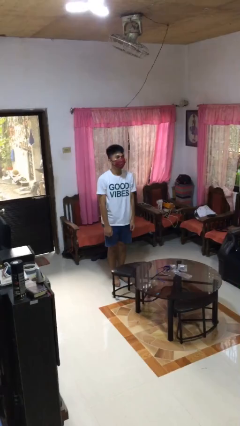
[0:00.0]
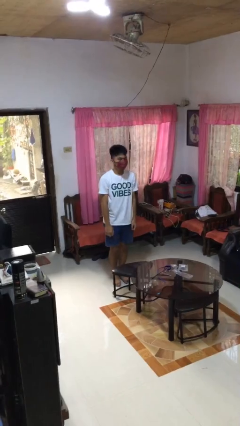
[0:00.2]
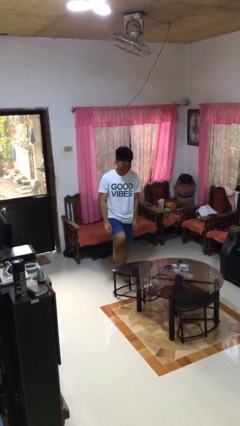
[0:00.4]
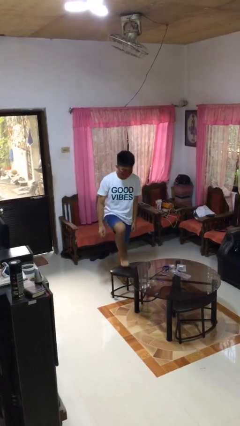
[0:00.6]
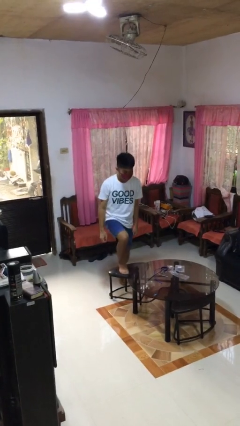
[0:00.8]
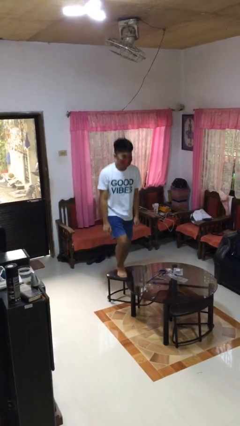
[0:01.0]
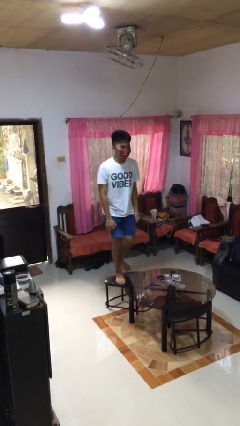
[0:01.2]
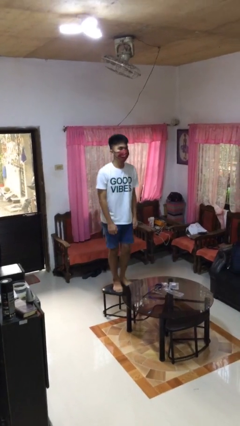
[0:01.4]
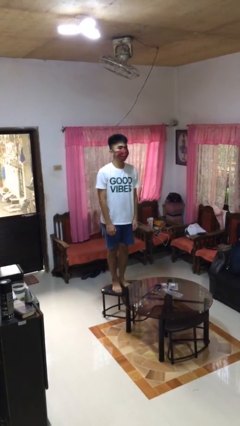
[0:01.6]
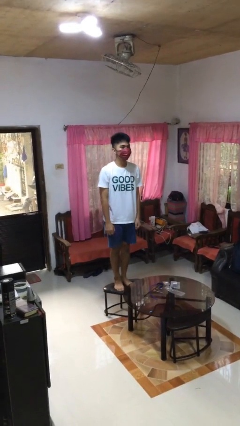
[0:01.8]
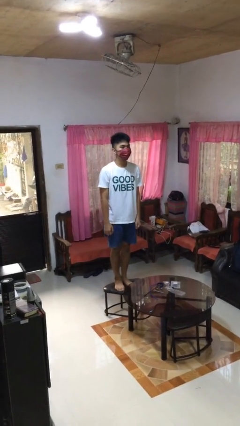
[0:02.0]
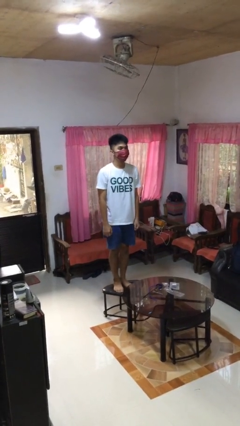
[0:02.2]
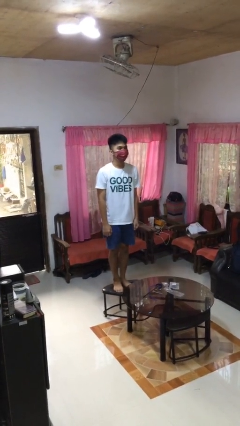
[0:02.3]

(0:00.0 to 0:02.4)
person climbs on chair

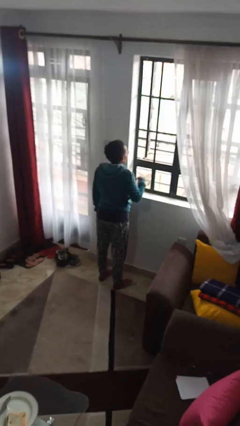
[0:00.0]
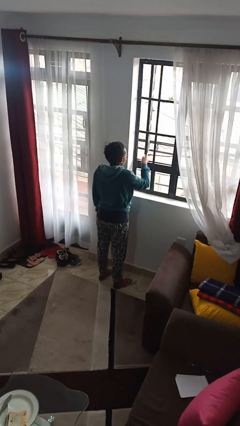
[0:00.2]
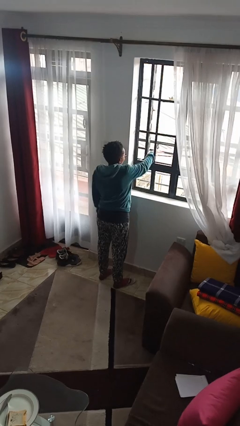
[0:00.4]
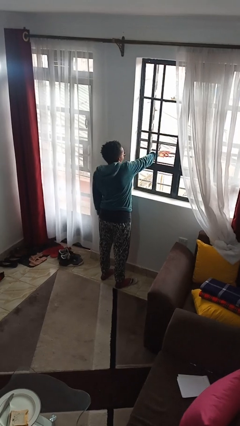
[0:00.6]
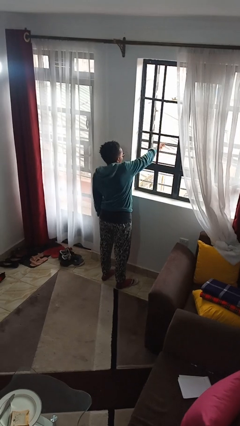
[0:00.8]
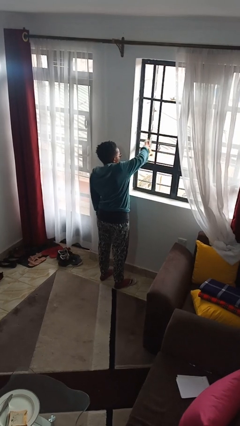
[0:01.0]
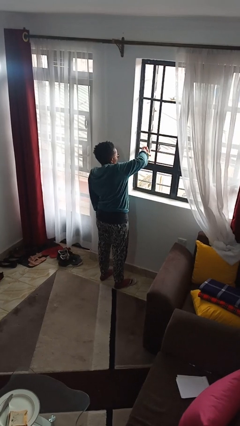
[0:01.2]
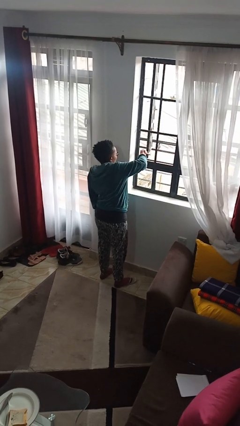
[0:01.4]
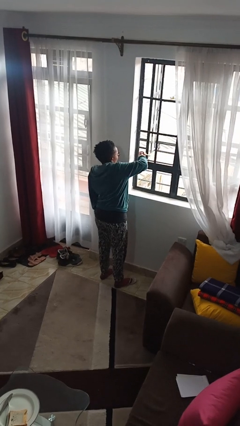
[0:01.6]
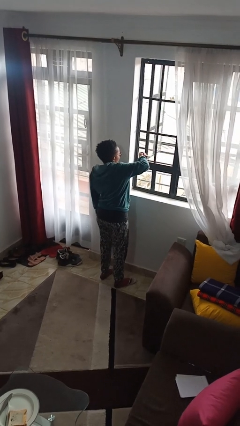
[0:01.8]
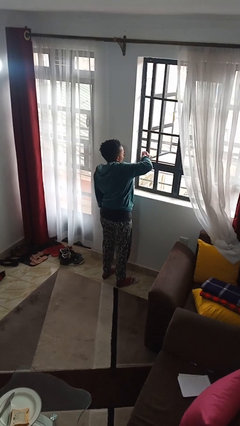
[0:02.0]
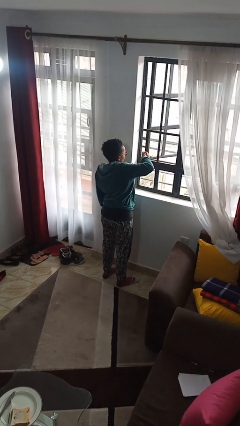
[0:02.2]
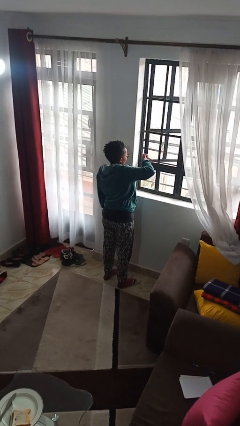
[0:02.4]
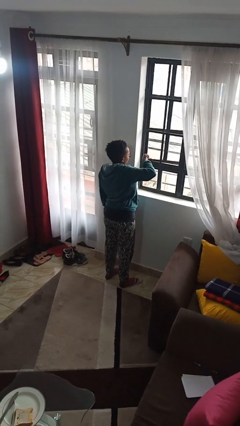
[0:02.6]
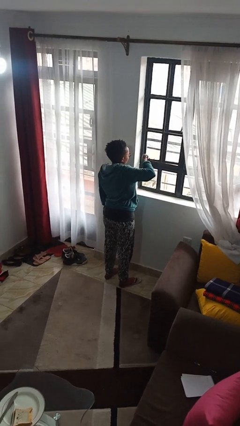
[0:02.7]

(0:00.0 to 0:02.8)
person closes home window

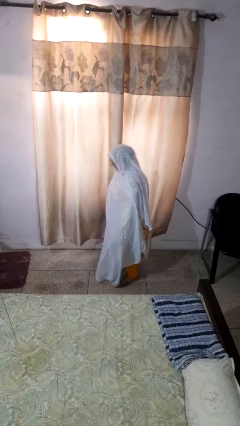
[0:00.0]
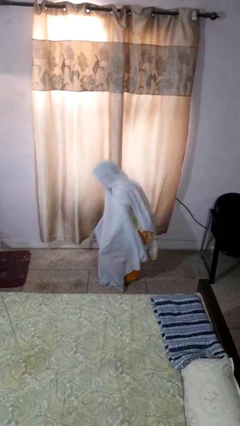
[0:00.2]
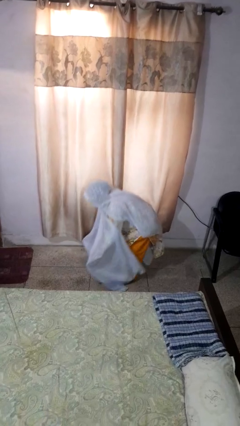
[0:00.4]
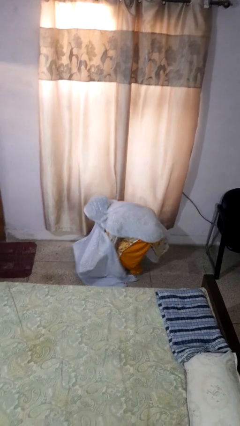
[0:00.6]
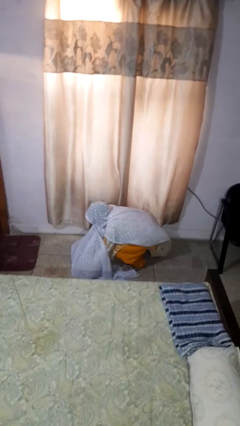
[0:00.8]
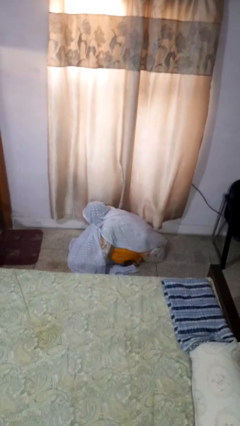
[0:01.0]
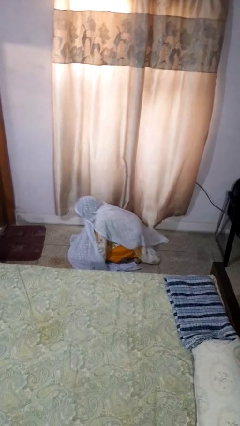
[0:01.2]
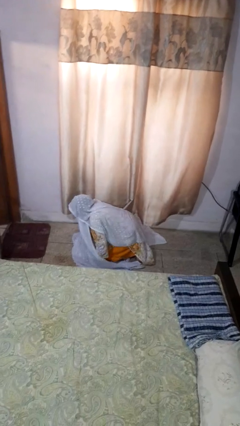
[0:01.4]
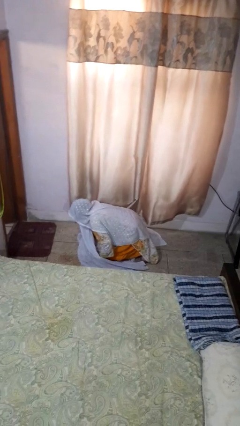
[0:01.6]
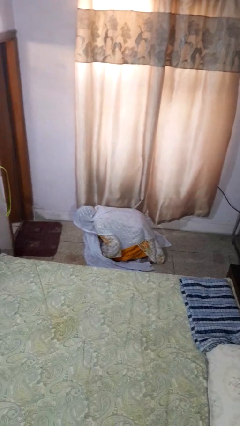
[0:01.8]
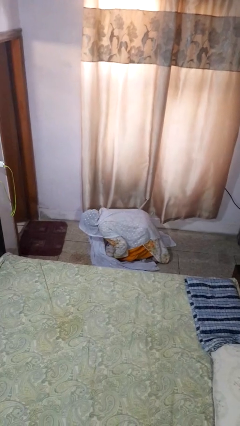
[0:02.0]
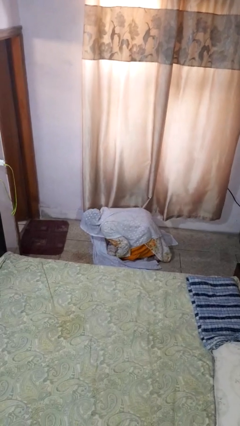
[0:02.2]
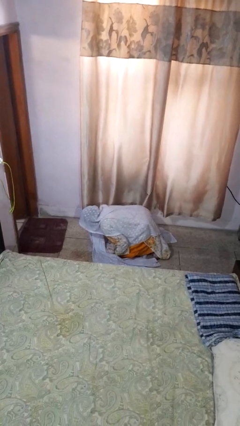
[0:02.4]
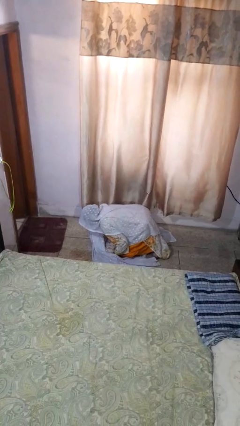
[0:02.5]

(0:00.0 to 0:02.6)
person falls while standing

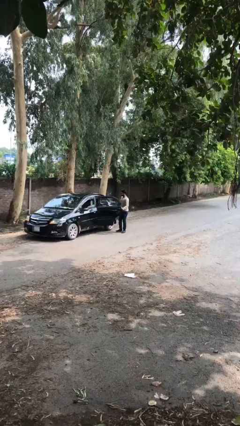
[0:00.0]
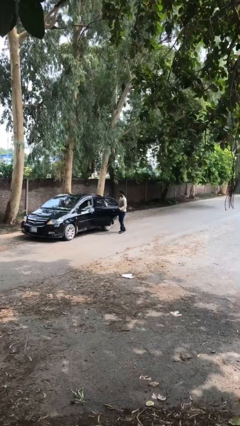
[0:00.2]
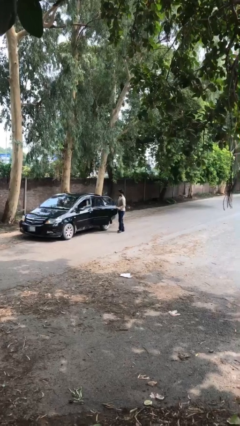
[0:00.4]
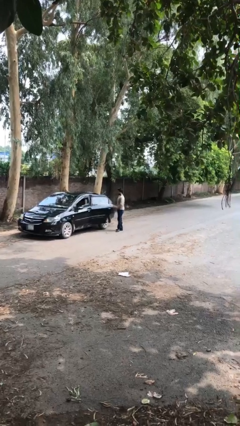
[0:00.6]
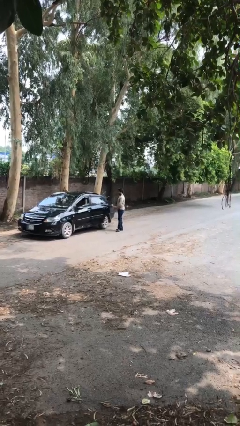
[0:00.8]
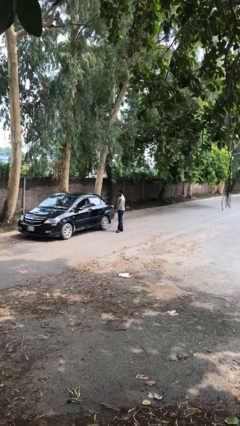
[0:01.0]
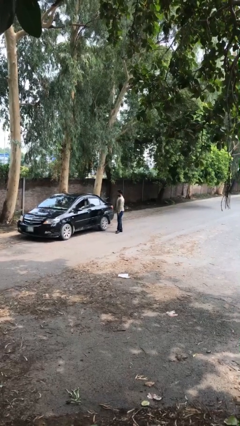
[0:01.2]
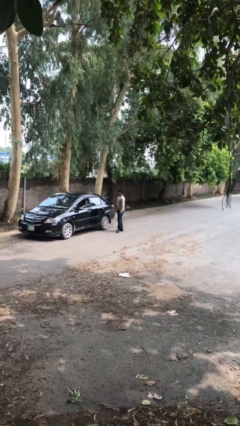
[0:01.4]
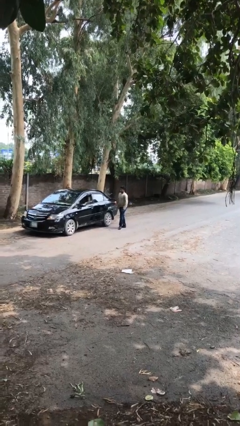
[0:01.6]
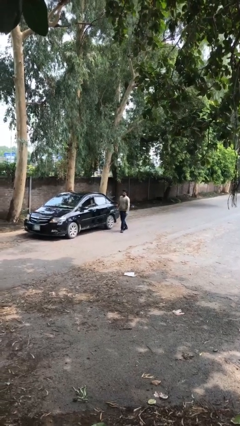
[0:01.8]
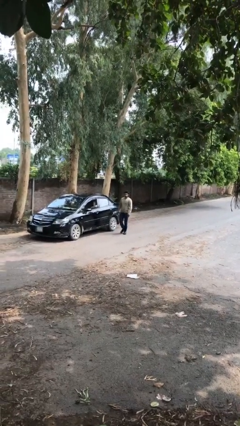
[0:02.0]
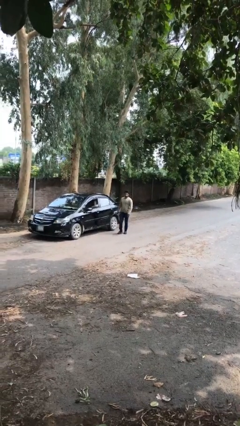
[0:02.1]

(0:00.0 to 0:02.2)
person closes car door

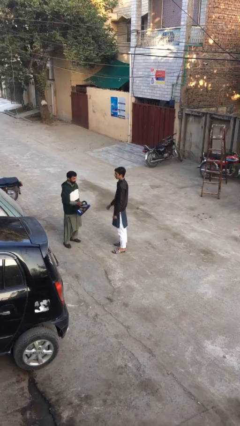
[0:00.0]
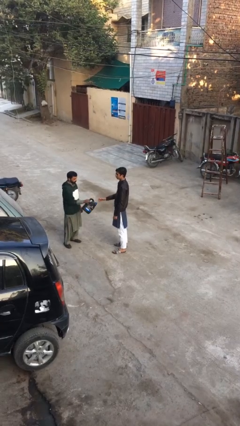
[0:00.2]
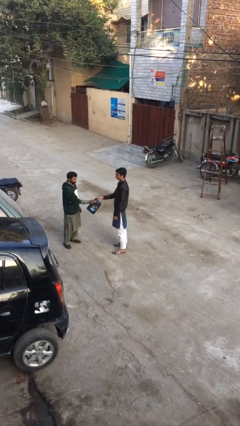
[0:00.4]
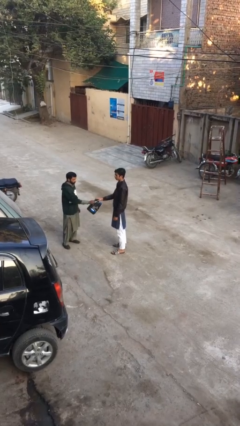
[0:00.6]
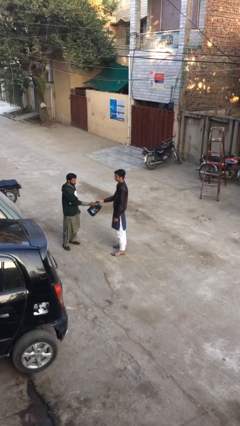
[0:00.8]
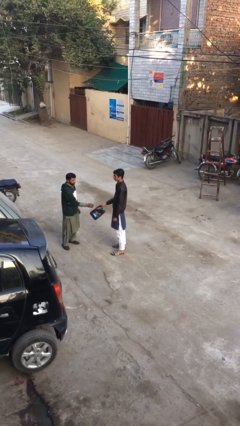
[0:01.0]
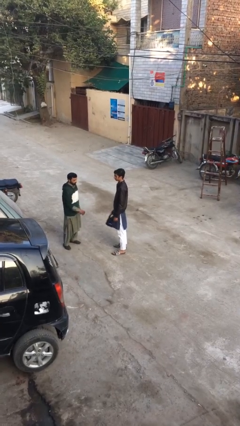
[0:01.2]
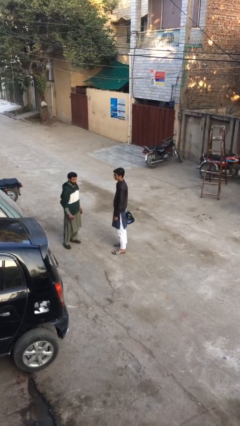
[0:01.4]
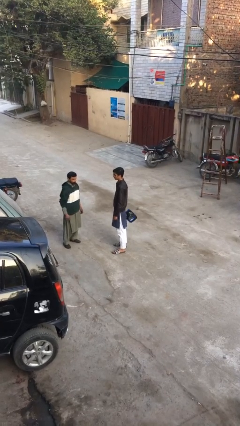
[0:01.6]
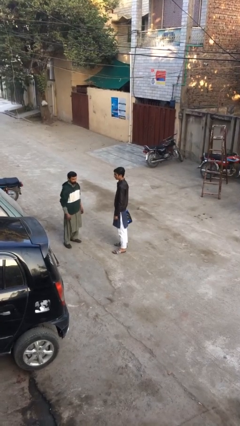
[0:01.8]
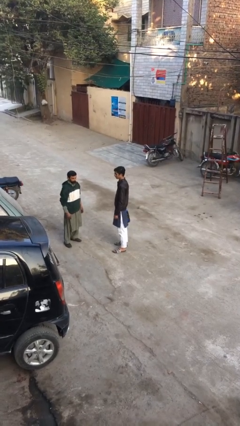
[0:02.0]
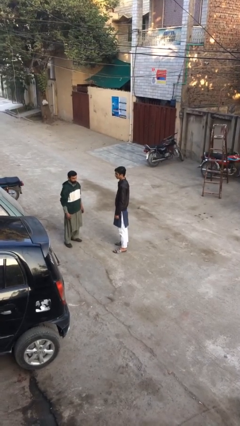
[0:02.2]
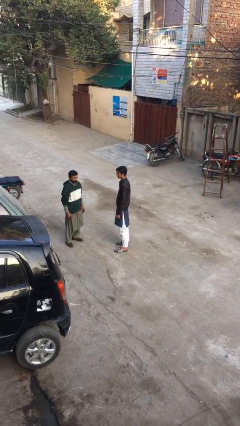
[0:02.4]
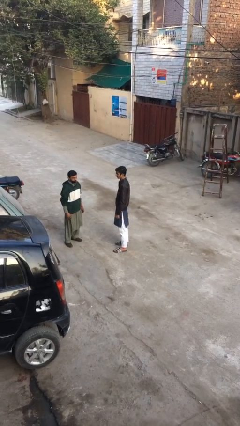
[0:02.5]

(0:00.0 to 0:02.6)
person transfers object to person

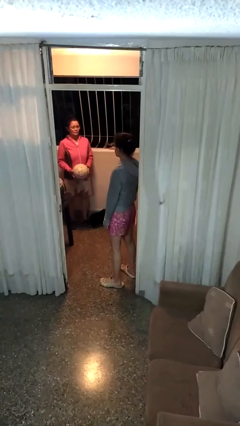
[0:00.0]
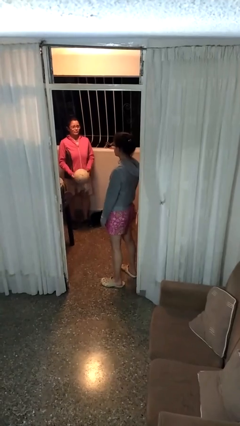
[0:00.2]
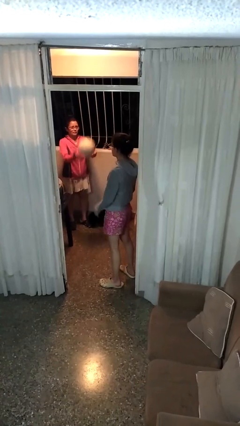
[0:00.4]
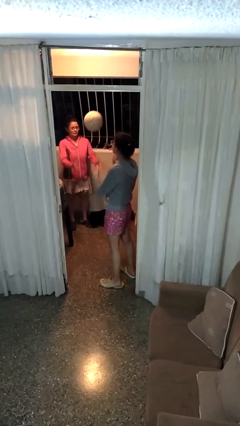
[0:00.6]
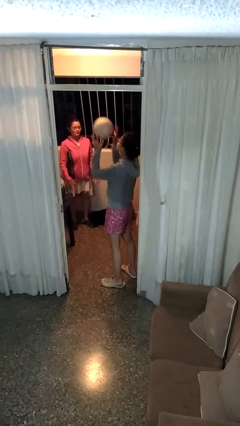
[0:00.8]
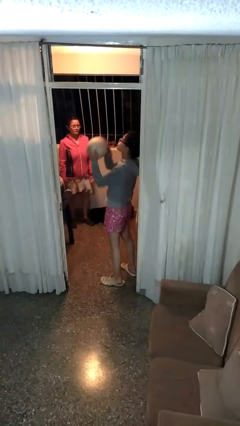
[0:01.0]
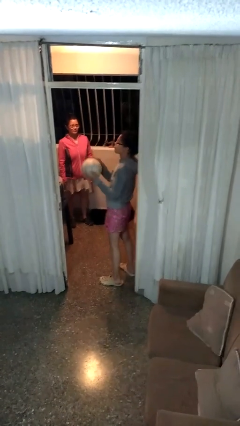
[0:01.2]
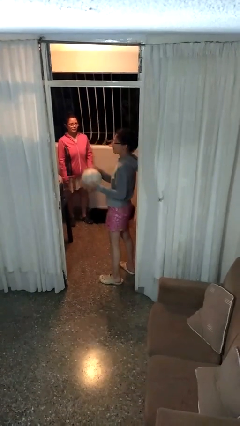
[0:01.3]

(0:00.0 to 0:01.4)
person catches object from person

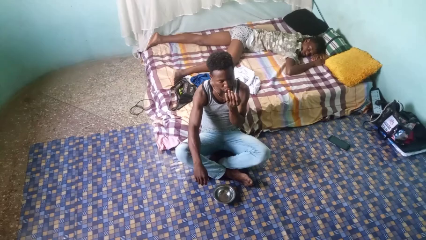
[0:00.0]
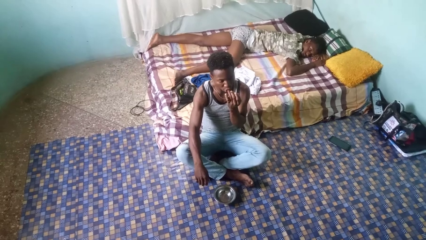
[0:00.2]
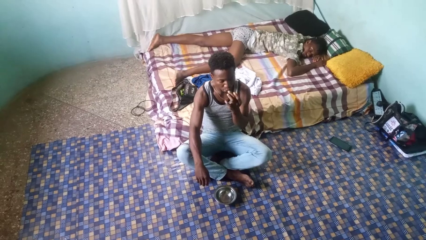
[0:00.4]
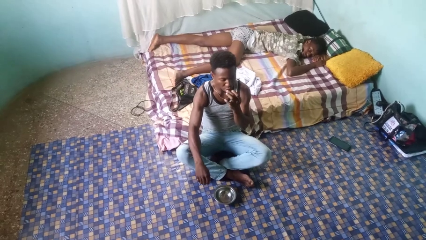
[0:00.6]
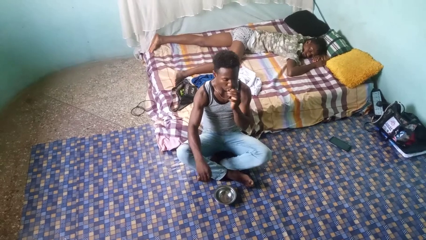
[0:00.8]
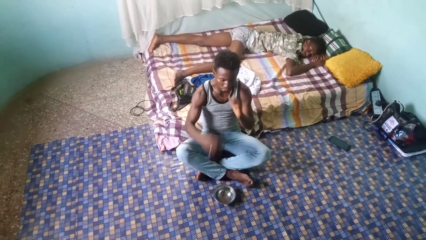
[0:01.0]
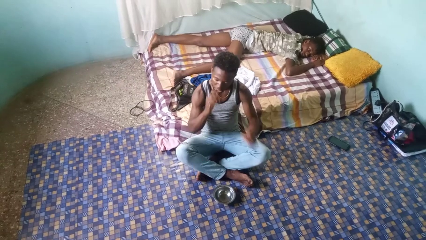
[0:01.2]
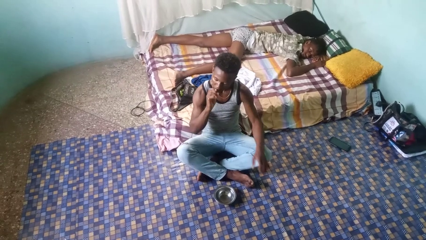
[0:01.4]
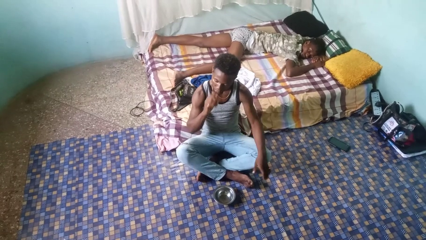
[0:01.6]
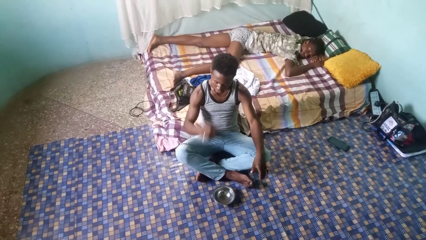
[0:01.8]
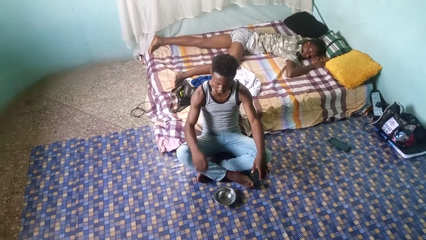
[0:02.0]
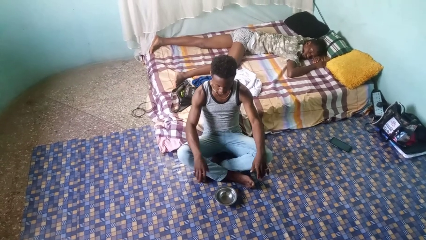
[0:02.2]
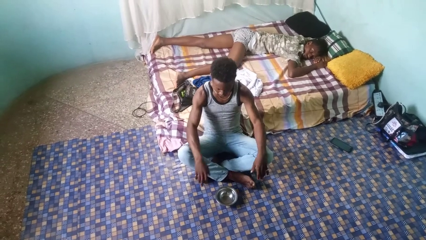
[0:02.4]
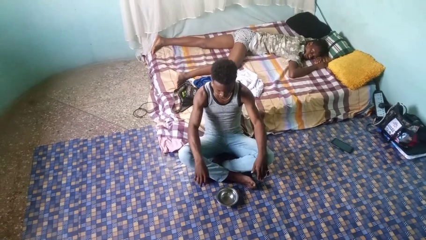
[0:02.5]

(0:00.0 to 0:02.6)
person licks fingers

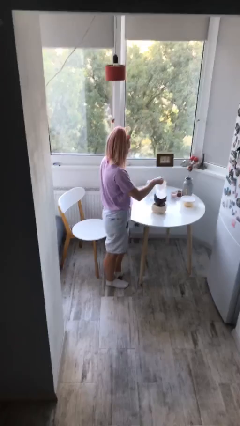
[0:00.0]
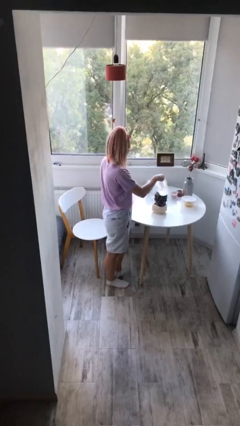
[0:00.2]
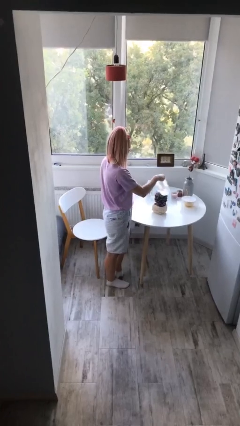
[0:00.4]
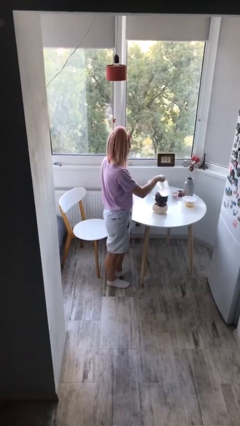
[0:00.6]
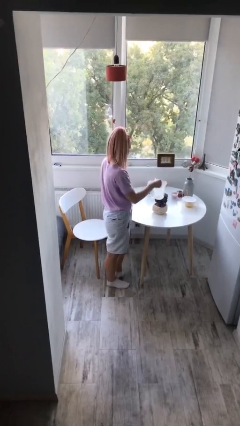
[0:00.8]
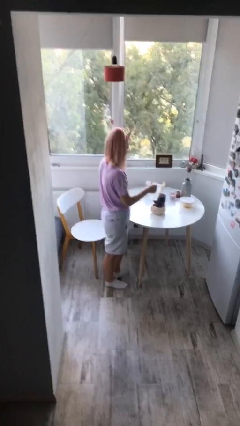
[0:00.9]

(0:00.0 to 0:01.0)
person waters houseplant
